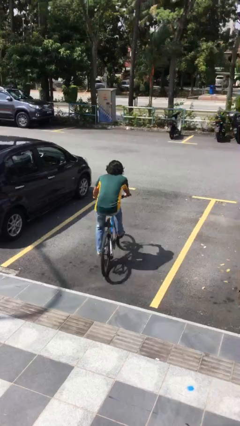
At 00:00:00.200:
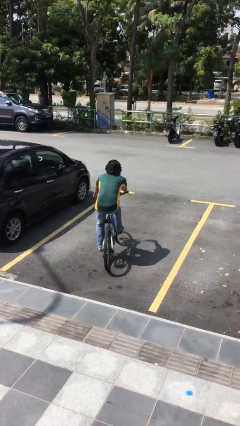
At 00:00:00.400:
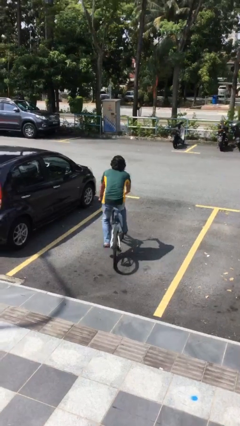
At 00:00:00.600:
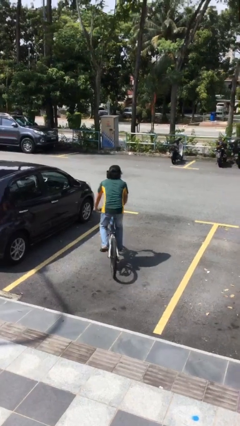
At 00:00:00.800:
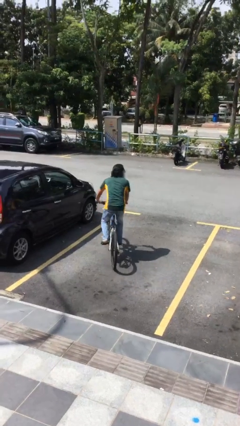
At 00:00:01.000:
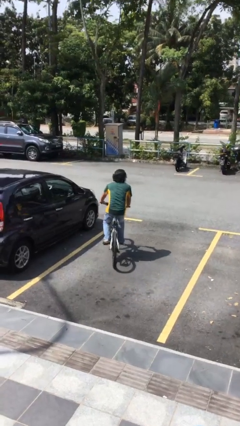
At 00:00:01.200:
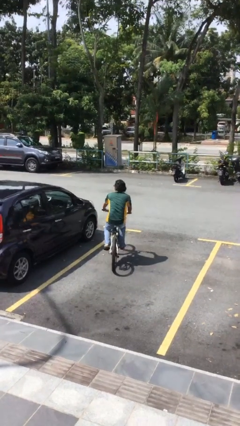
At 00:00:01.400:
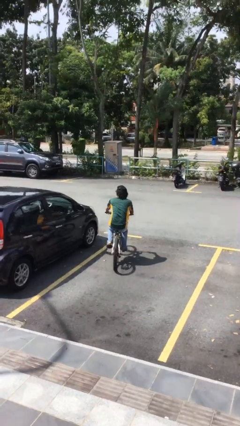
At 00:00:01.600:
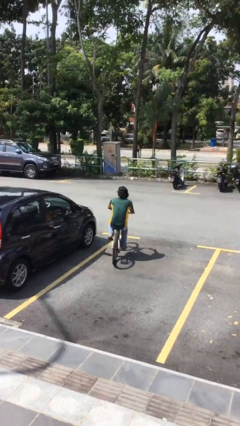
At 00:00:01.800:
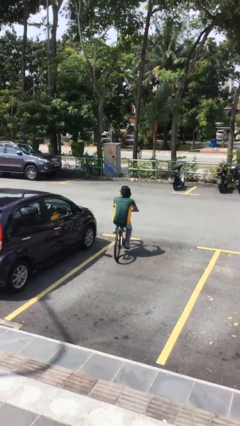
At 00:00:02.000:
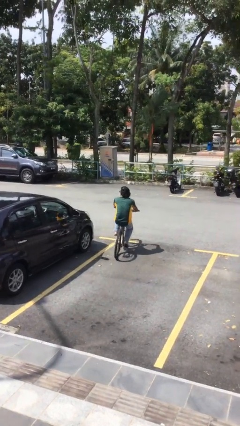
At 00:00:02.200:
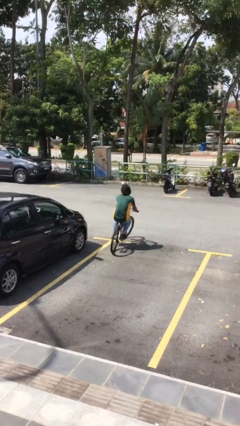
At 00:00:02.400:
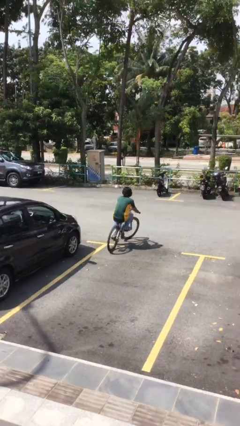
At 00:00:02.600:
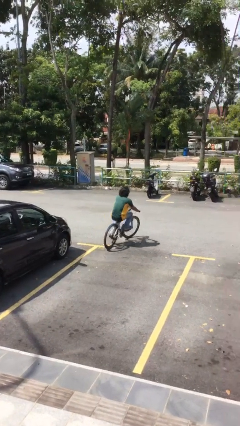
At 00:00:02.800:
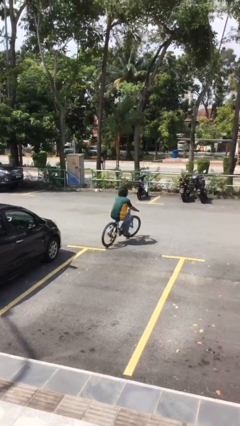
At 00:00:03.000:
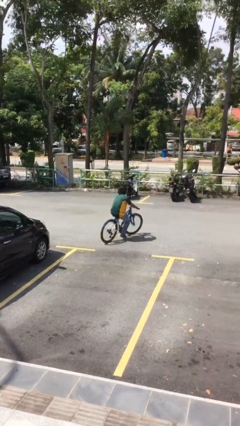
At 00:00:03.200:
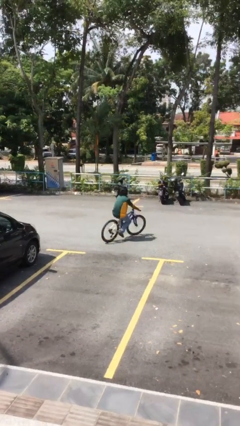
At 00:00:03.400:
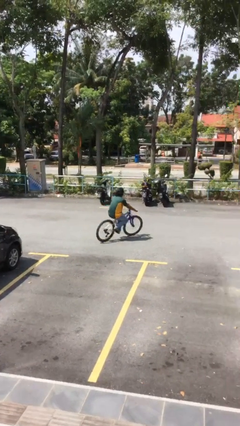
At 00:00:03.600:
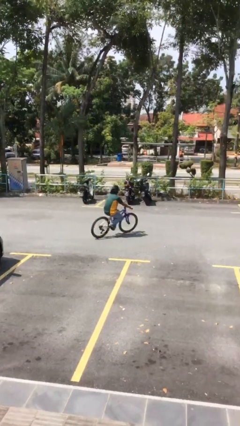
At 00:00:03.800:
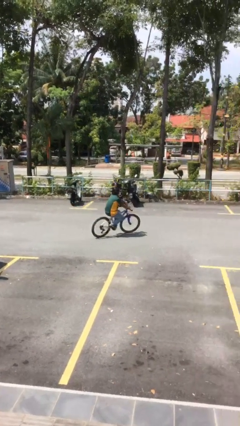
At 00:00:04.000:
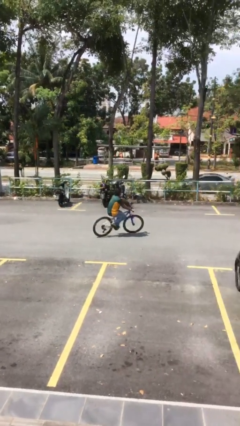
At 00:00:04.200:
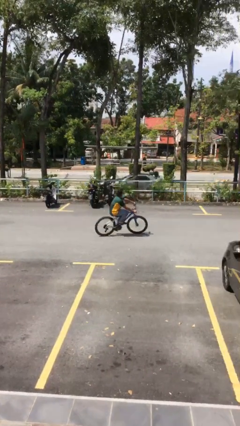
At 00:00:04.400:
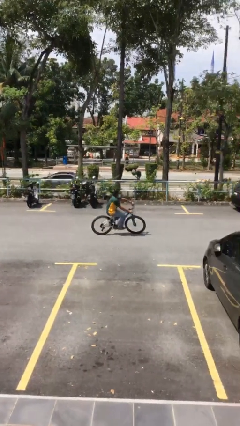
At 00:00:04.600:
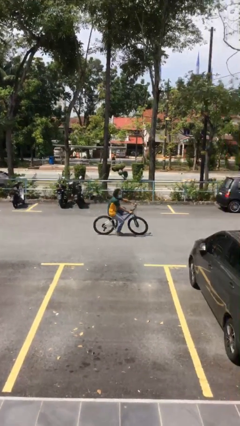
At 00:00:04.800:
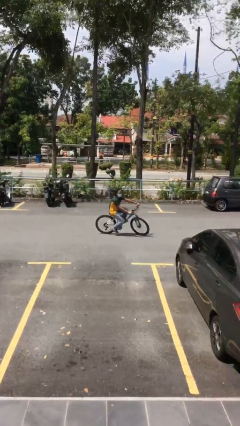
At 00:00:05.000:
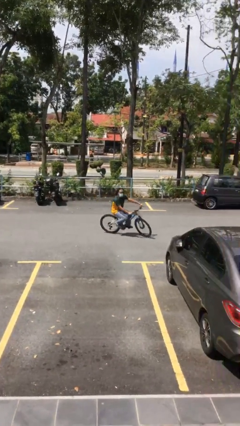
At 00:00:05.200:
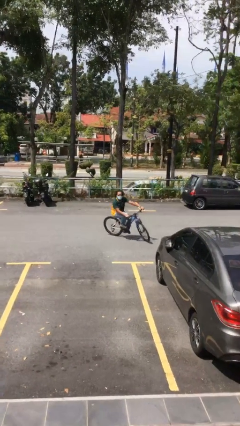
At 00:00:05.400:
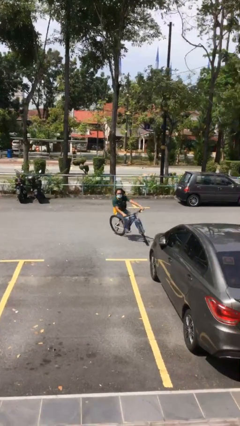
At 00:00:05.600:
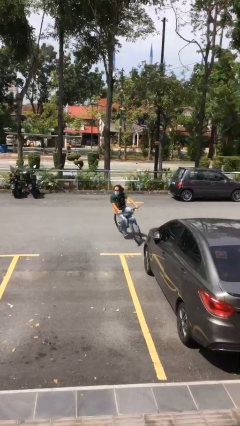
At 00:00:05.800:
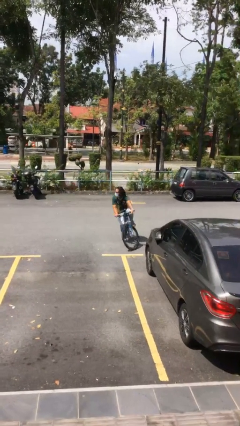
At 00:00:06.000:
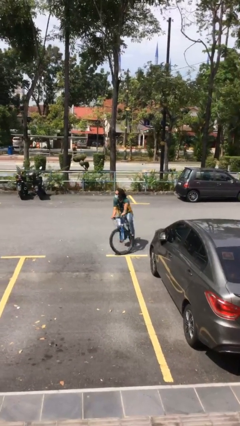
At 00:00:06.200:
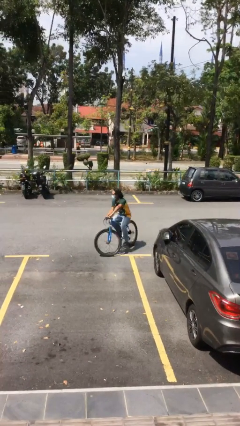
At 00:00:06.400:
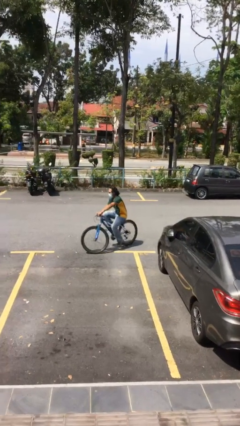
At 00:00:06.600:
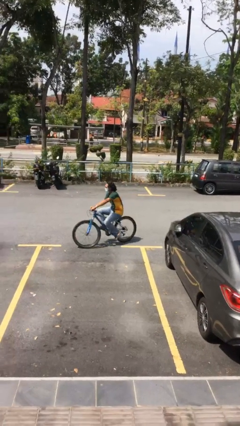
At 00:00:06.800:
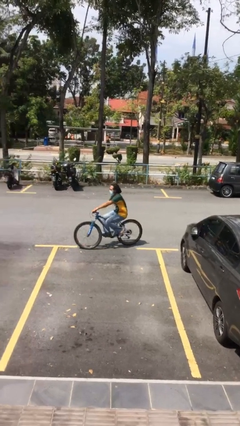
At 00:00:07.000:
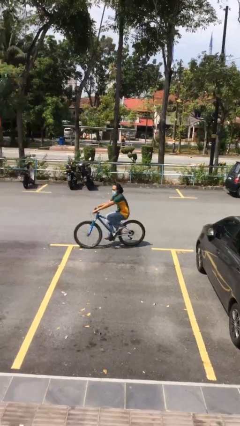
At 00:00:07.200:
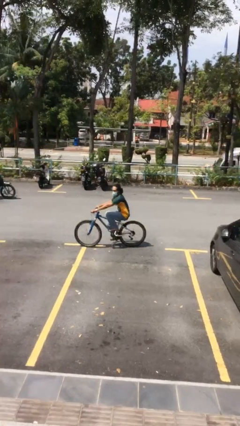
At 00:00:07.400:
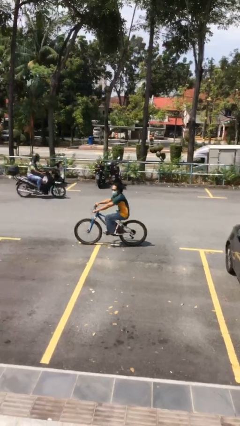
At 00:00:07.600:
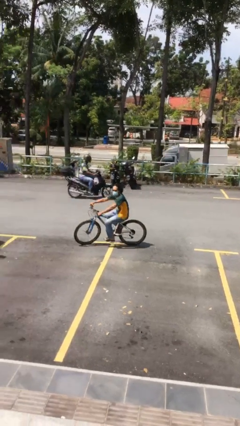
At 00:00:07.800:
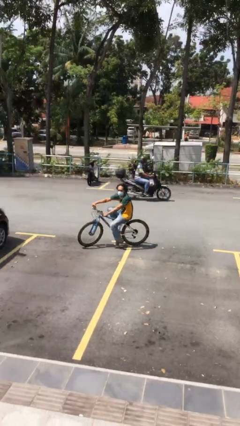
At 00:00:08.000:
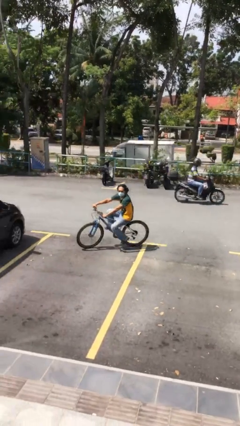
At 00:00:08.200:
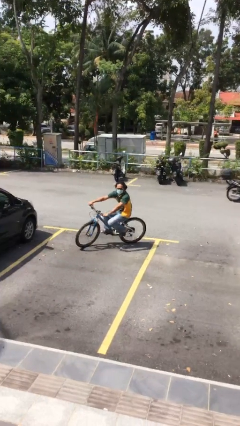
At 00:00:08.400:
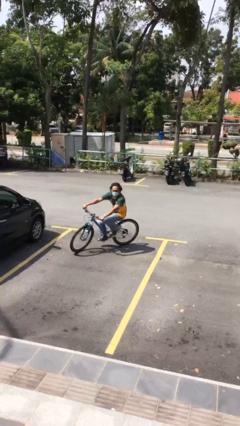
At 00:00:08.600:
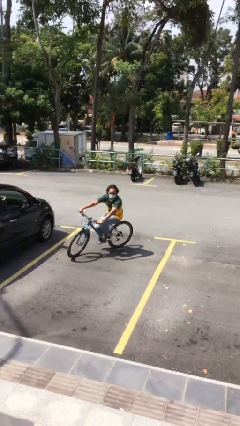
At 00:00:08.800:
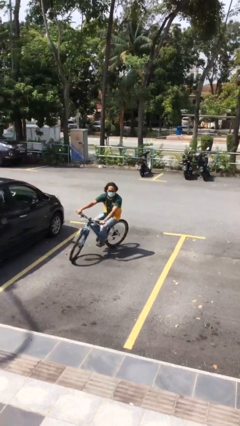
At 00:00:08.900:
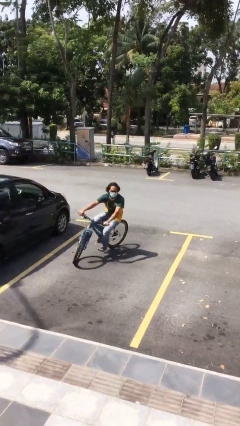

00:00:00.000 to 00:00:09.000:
person rides bicycle

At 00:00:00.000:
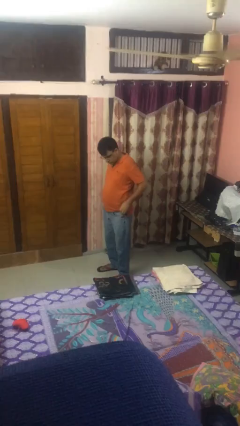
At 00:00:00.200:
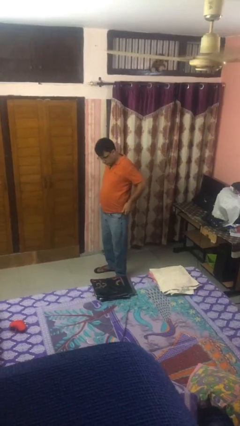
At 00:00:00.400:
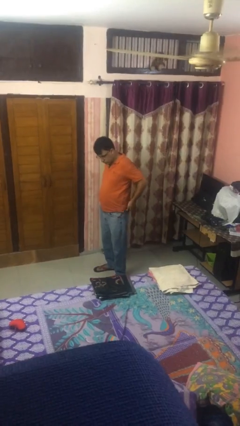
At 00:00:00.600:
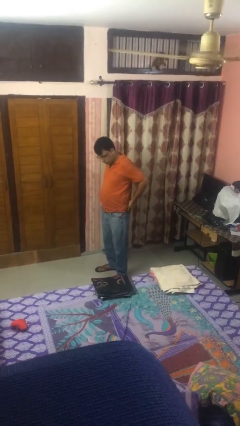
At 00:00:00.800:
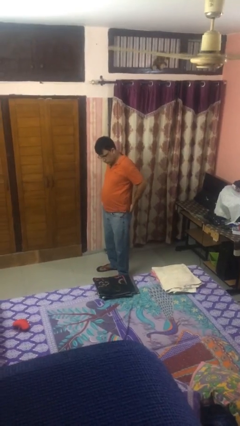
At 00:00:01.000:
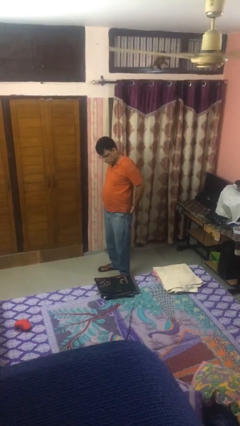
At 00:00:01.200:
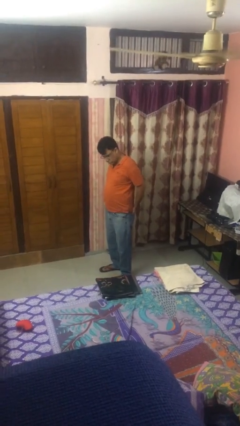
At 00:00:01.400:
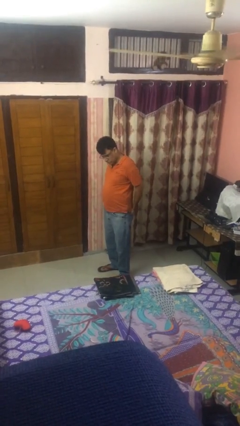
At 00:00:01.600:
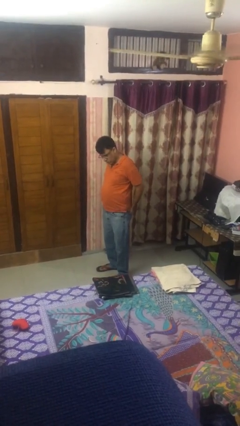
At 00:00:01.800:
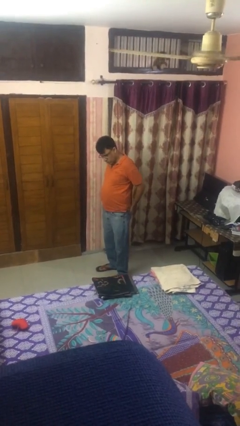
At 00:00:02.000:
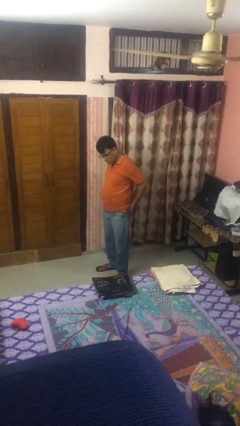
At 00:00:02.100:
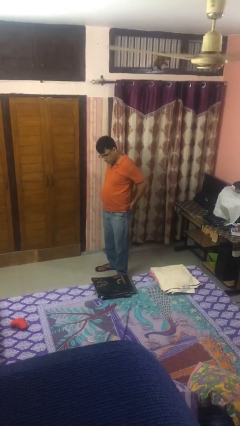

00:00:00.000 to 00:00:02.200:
person puts hands in back pockets

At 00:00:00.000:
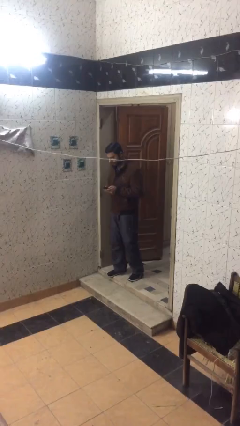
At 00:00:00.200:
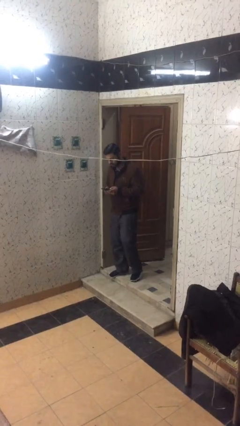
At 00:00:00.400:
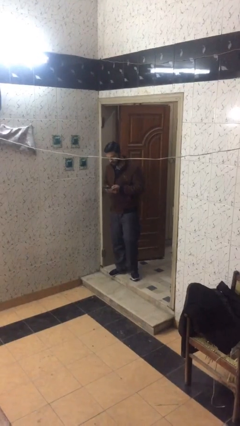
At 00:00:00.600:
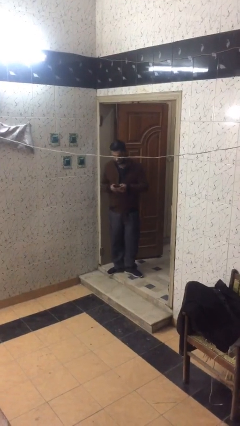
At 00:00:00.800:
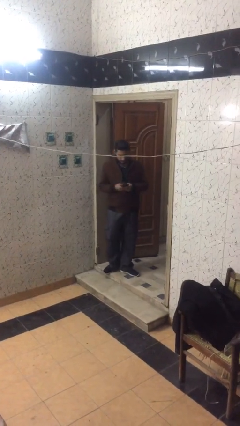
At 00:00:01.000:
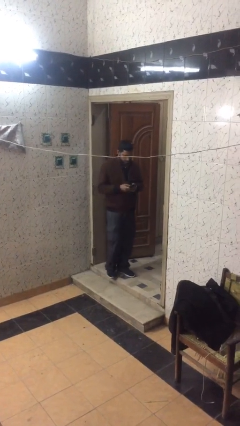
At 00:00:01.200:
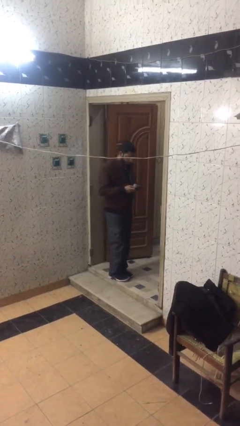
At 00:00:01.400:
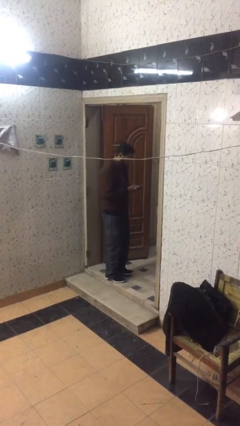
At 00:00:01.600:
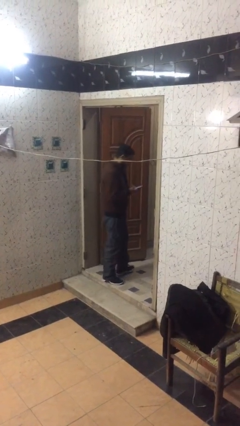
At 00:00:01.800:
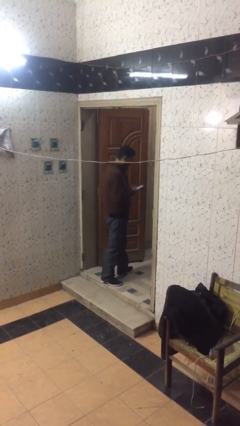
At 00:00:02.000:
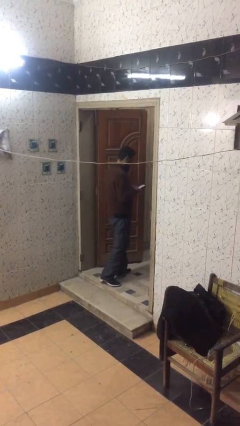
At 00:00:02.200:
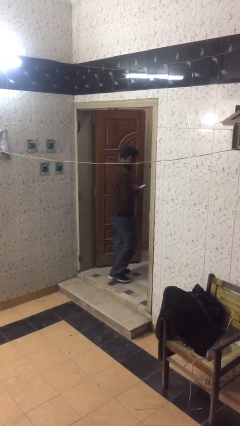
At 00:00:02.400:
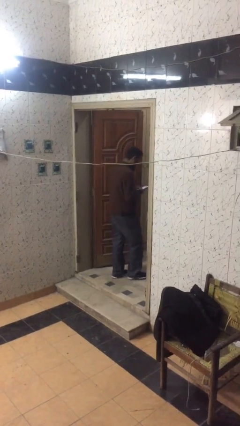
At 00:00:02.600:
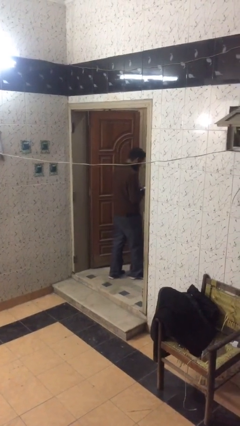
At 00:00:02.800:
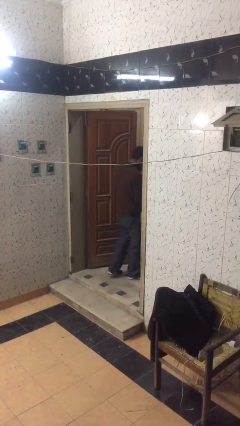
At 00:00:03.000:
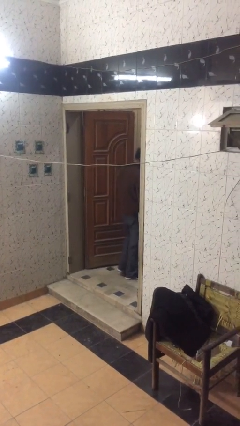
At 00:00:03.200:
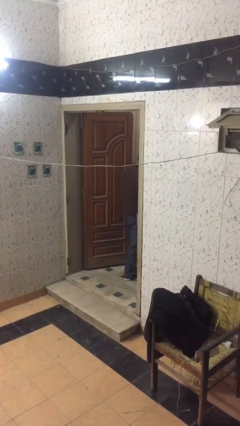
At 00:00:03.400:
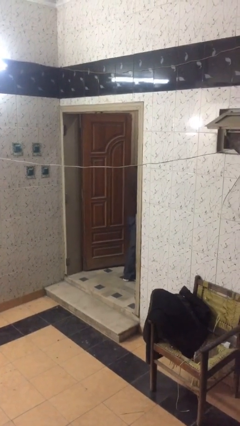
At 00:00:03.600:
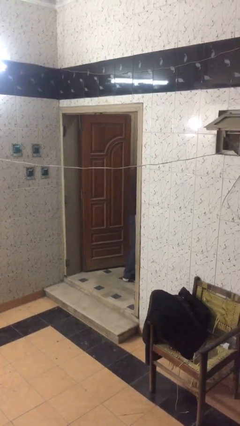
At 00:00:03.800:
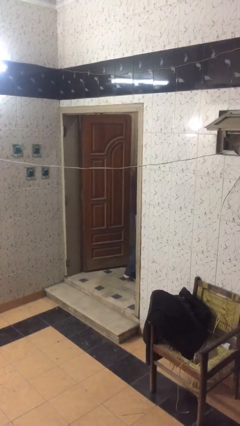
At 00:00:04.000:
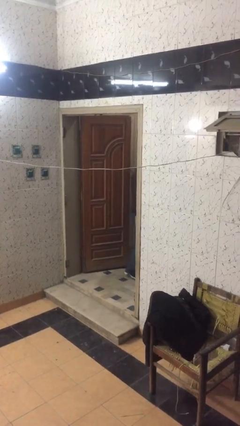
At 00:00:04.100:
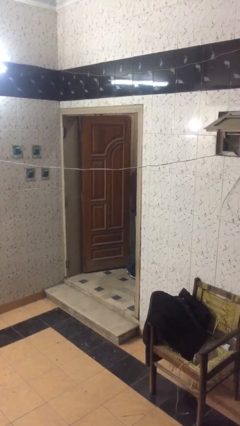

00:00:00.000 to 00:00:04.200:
person exits scene through structure

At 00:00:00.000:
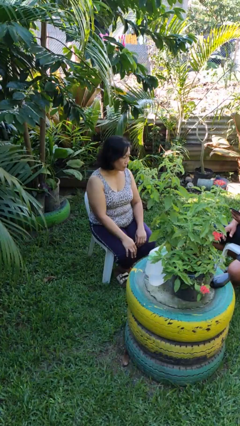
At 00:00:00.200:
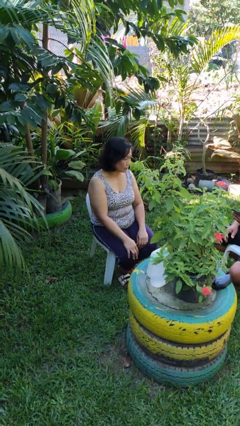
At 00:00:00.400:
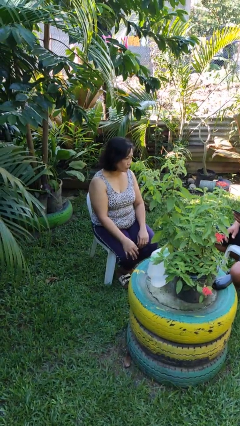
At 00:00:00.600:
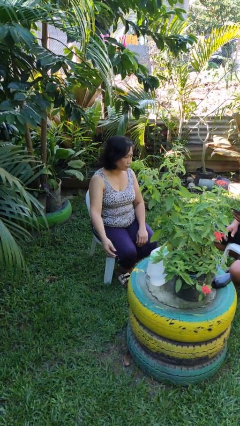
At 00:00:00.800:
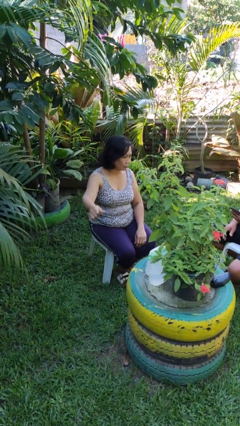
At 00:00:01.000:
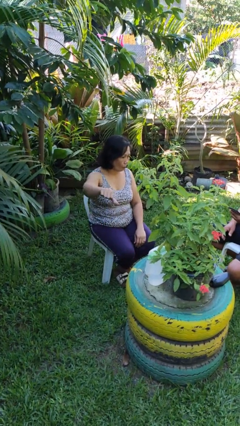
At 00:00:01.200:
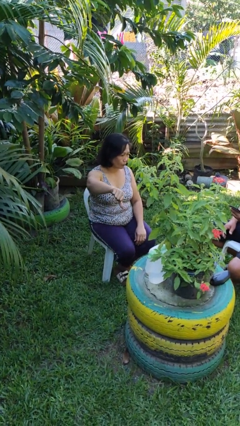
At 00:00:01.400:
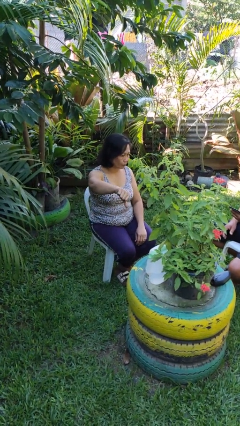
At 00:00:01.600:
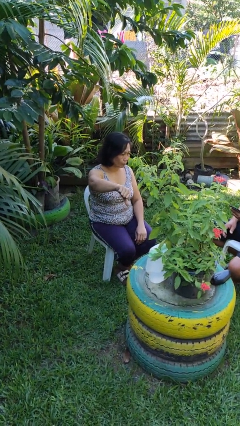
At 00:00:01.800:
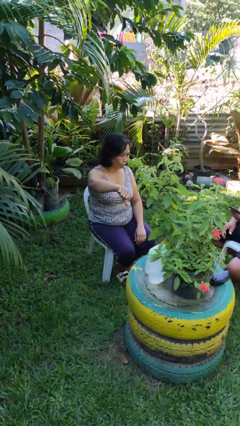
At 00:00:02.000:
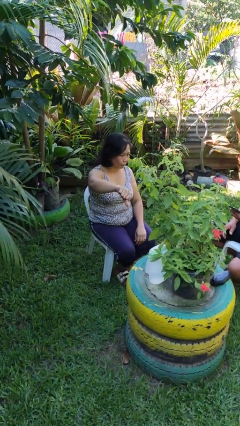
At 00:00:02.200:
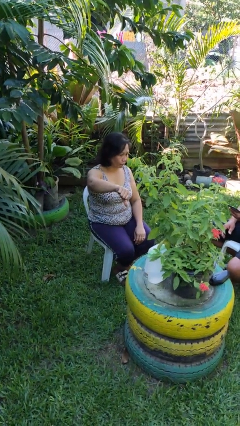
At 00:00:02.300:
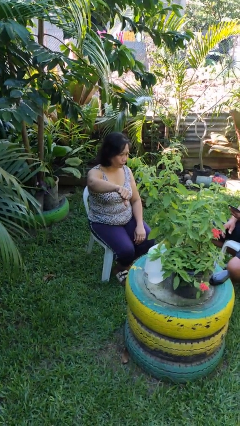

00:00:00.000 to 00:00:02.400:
person gestures thumbs down
